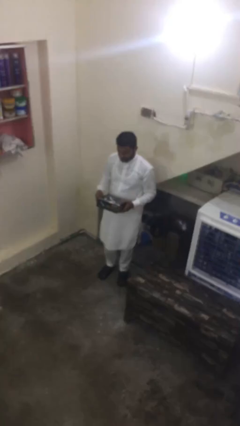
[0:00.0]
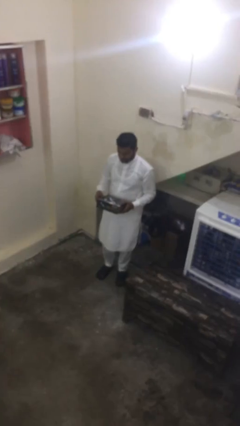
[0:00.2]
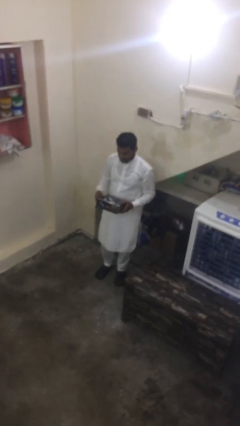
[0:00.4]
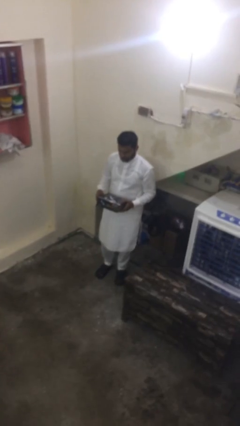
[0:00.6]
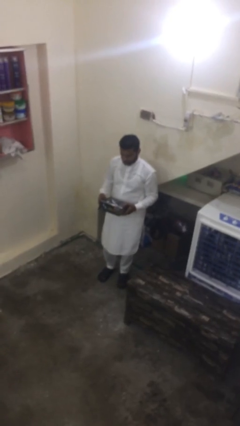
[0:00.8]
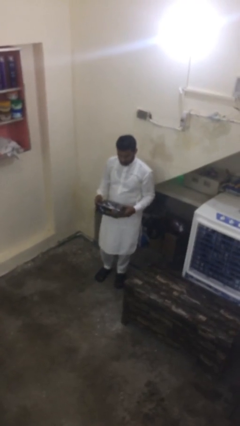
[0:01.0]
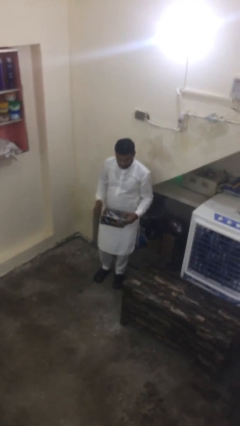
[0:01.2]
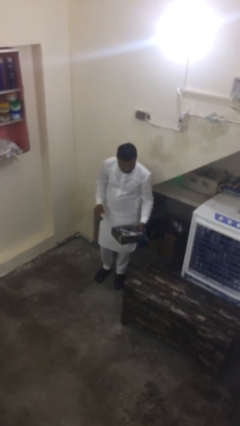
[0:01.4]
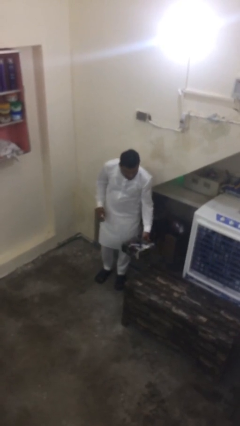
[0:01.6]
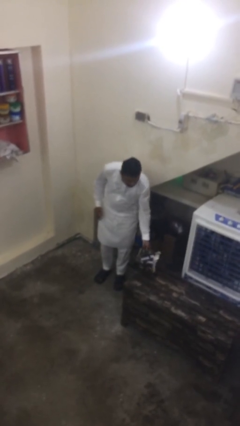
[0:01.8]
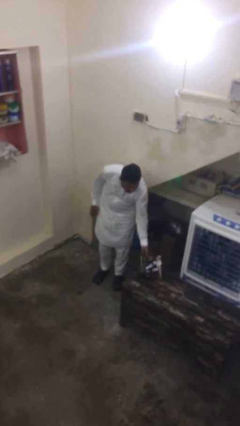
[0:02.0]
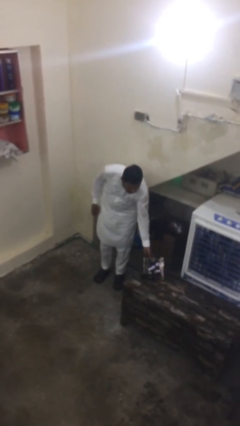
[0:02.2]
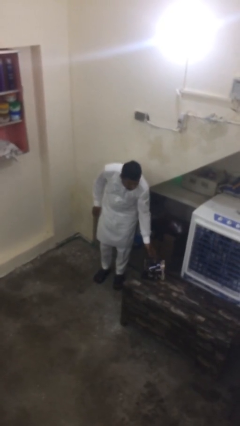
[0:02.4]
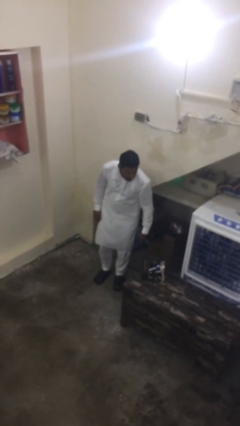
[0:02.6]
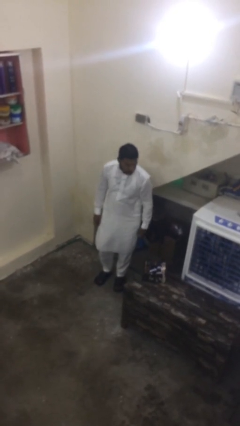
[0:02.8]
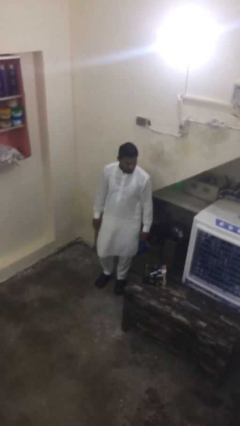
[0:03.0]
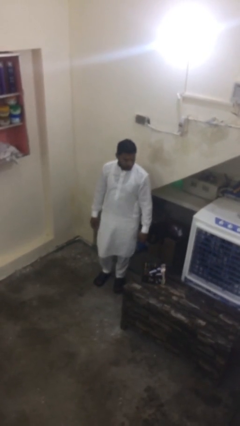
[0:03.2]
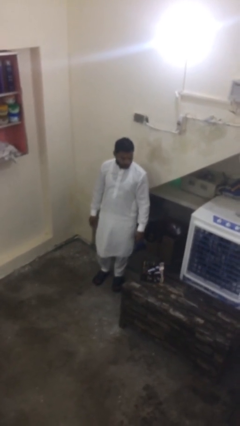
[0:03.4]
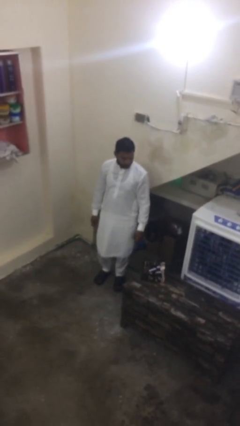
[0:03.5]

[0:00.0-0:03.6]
person puts down object on table

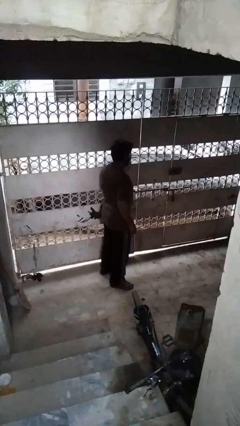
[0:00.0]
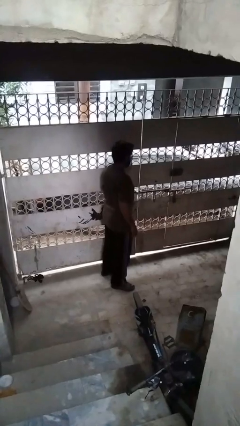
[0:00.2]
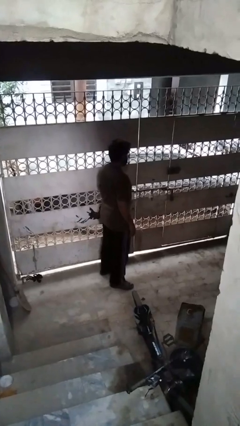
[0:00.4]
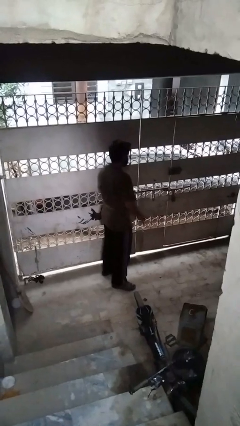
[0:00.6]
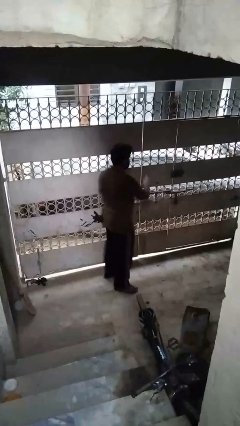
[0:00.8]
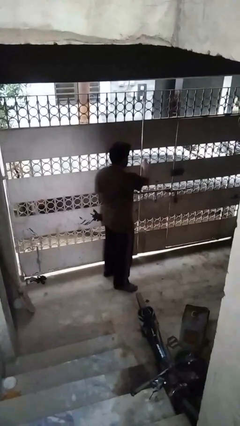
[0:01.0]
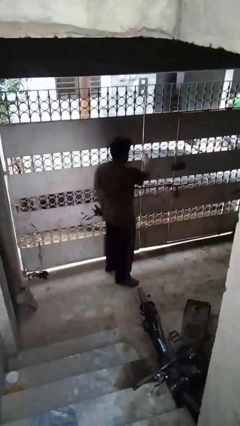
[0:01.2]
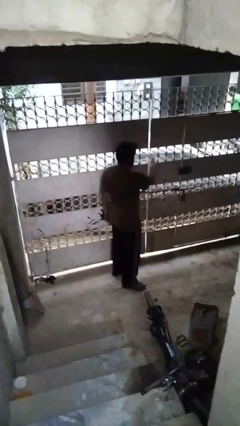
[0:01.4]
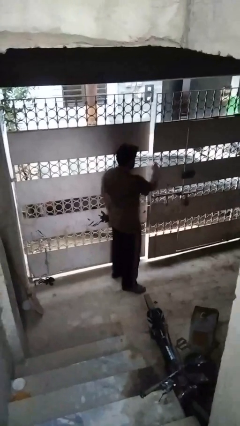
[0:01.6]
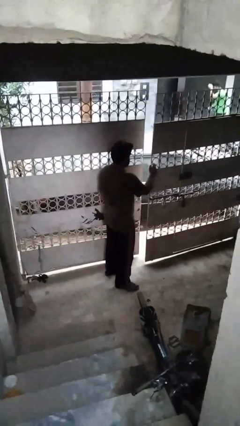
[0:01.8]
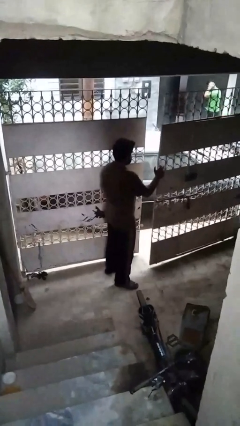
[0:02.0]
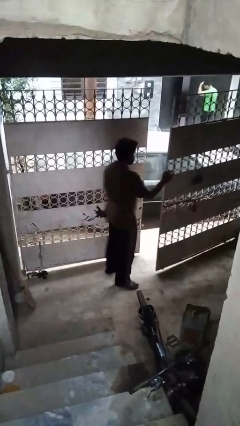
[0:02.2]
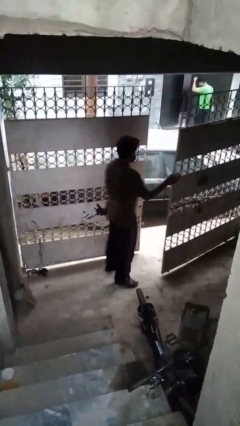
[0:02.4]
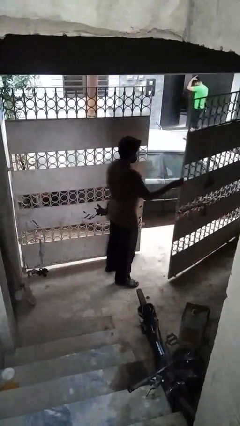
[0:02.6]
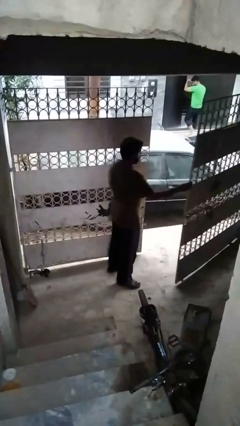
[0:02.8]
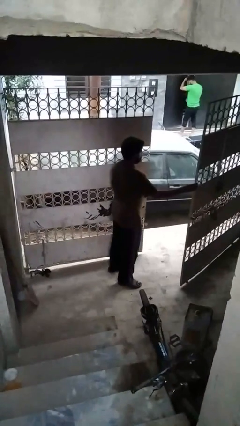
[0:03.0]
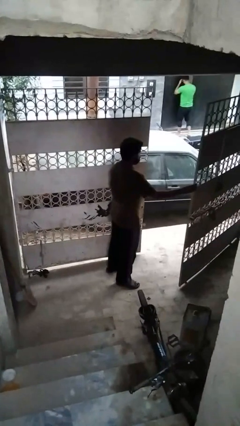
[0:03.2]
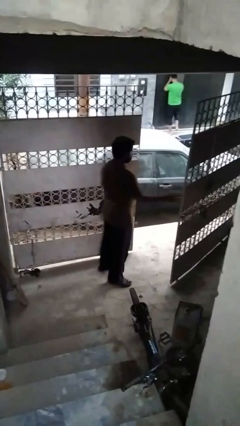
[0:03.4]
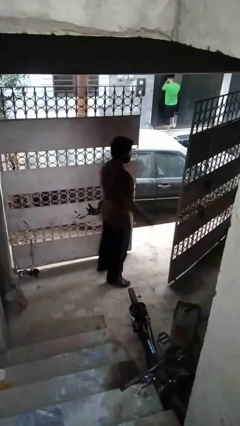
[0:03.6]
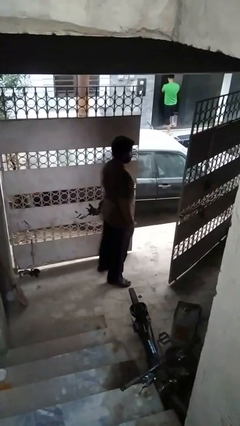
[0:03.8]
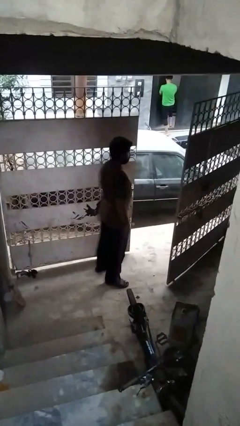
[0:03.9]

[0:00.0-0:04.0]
person opens gate

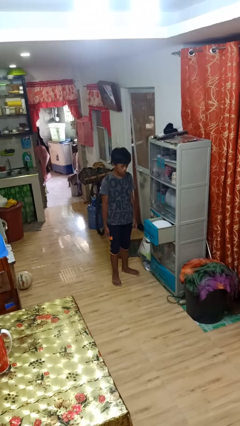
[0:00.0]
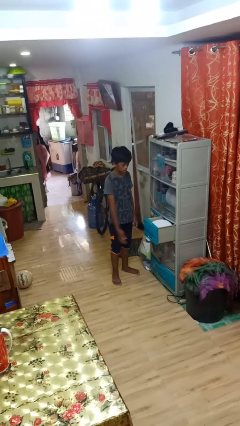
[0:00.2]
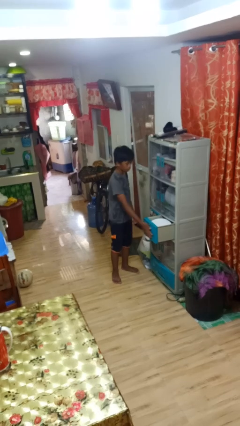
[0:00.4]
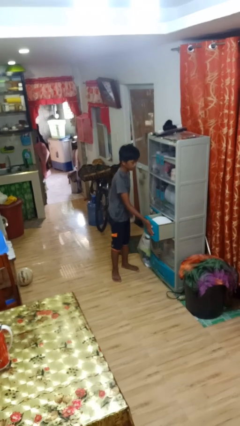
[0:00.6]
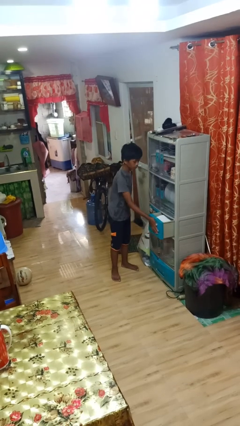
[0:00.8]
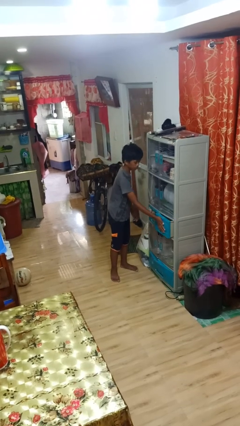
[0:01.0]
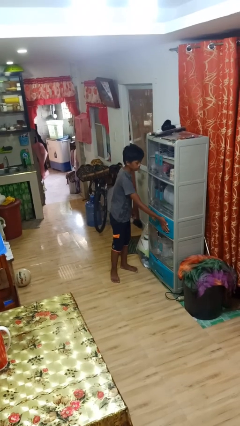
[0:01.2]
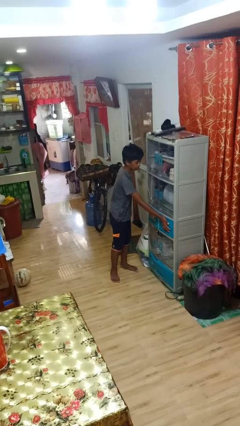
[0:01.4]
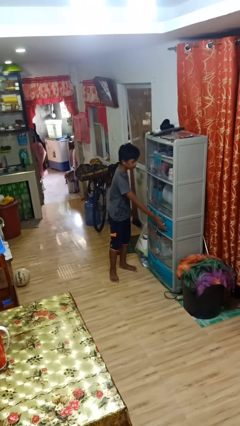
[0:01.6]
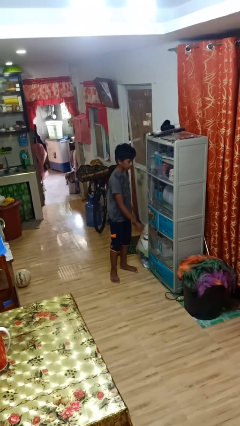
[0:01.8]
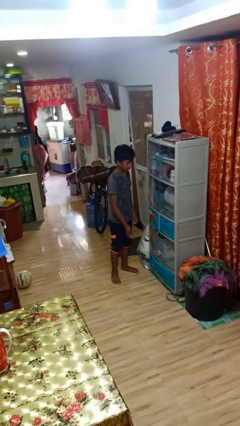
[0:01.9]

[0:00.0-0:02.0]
person closes kitchen drawer

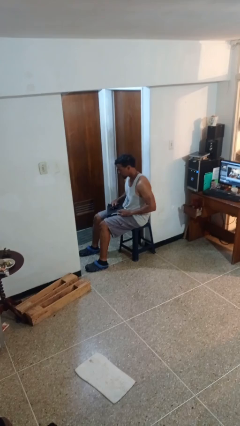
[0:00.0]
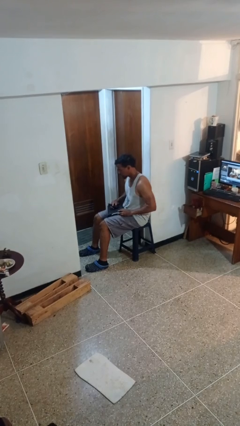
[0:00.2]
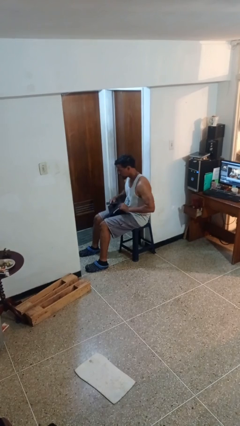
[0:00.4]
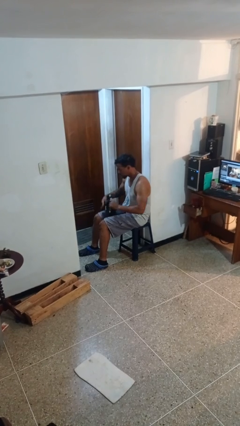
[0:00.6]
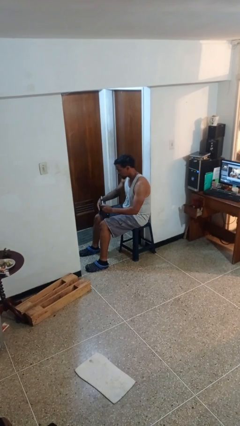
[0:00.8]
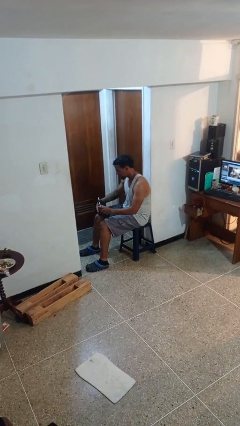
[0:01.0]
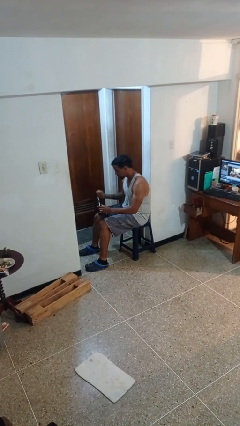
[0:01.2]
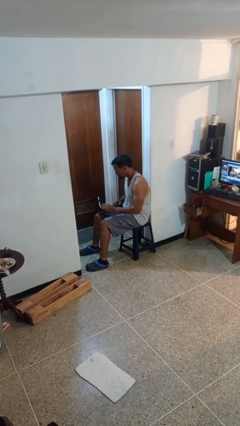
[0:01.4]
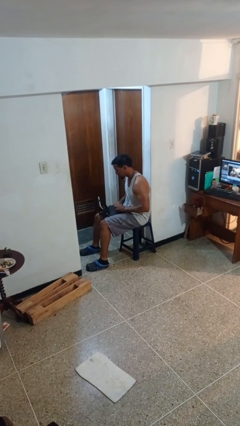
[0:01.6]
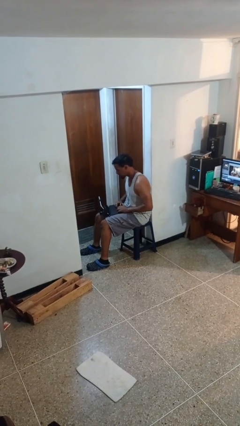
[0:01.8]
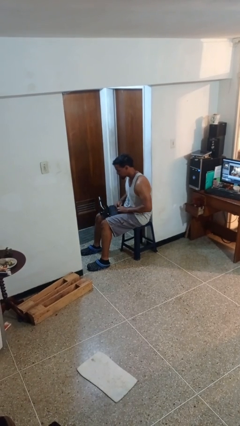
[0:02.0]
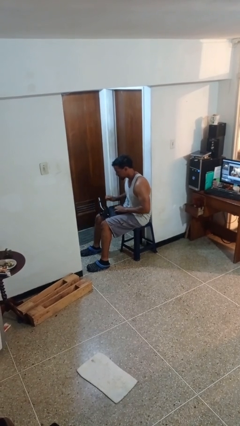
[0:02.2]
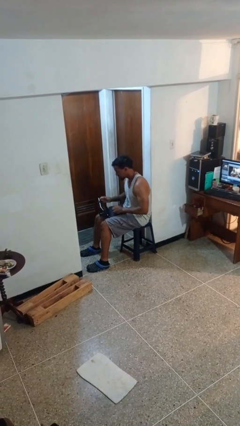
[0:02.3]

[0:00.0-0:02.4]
person opens laptop

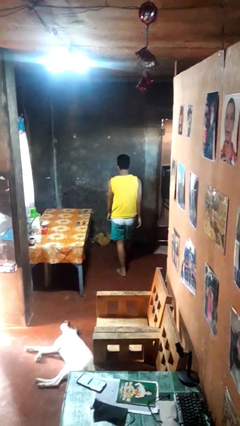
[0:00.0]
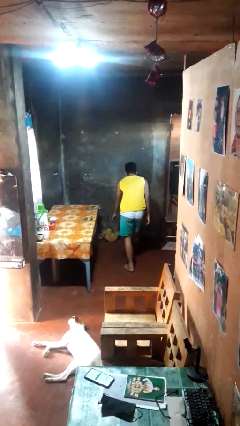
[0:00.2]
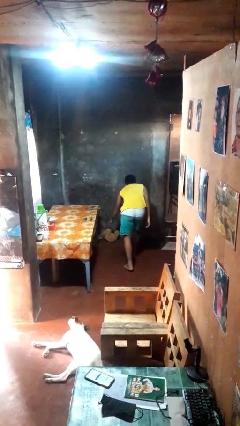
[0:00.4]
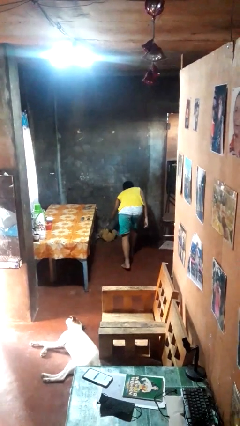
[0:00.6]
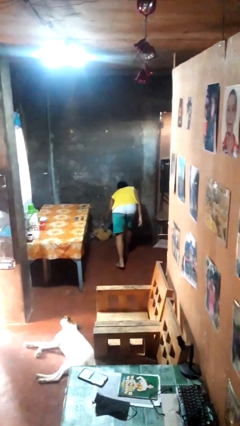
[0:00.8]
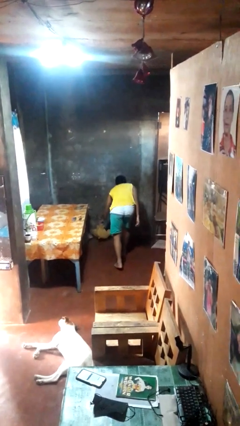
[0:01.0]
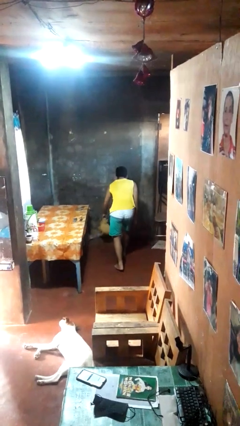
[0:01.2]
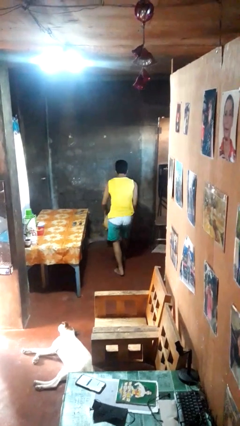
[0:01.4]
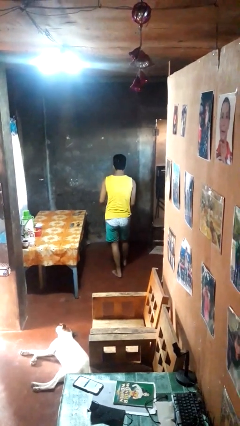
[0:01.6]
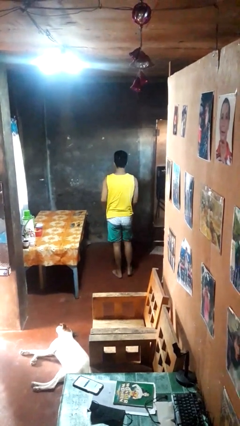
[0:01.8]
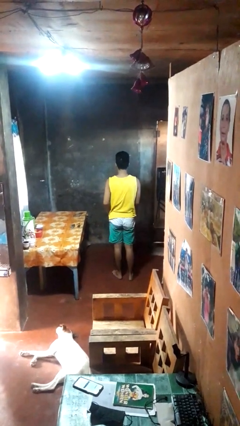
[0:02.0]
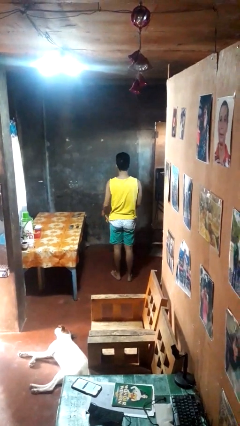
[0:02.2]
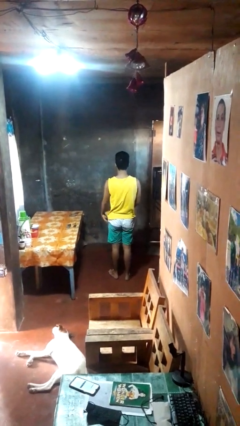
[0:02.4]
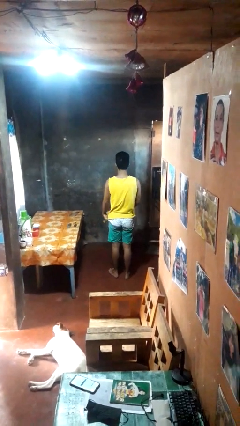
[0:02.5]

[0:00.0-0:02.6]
person picks up object from floor

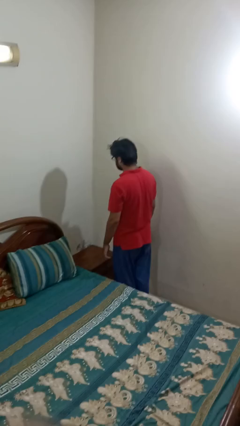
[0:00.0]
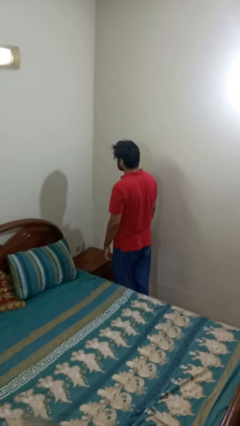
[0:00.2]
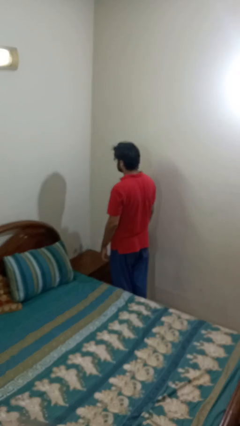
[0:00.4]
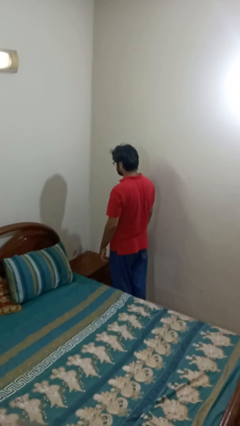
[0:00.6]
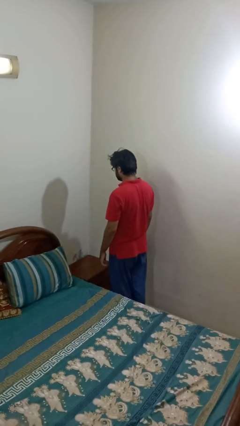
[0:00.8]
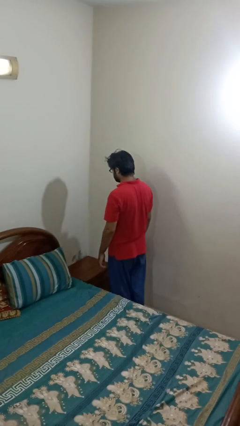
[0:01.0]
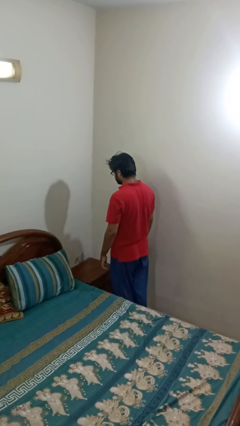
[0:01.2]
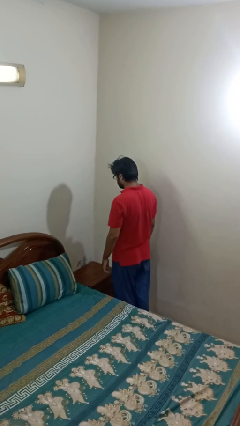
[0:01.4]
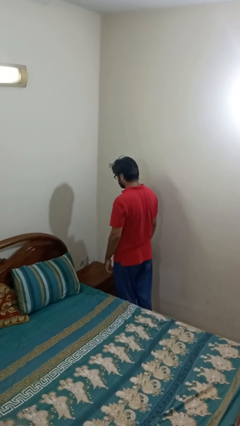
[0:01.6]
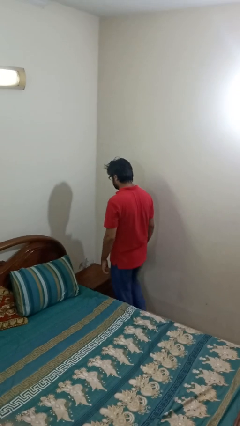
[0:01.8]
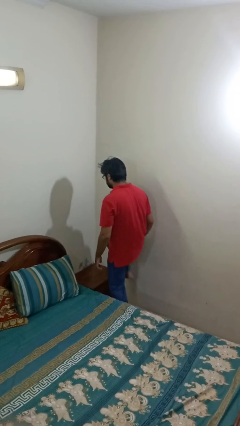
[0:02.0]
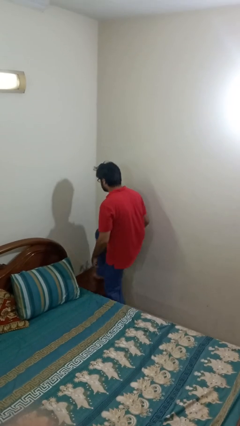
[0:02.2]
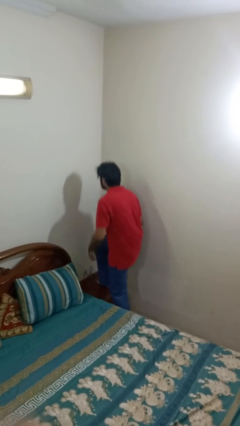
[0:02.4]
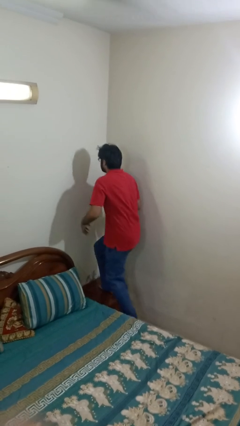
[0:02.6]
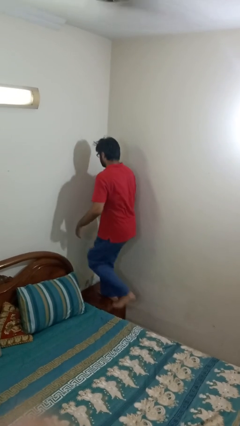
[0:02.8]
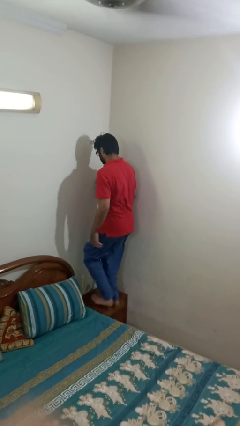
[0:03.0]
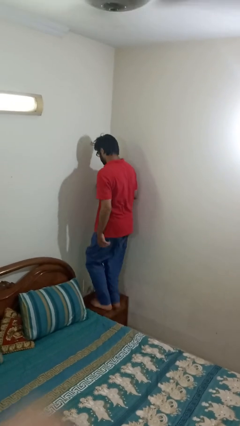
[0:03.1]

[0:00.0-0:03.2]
person climbs on table
